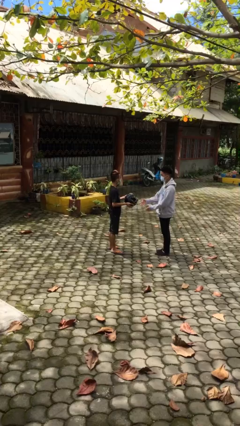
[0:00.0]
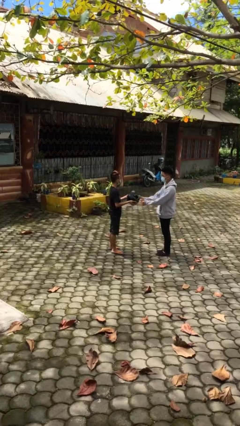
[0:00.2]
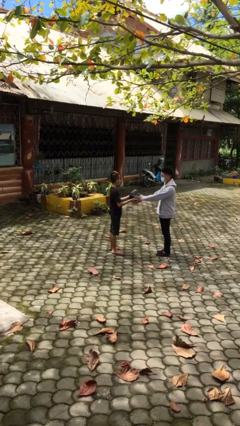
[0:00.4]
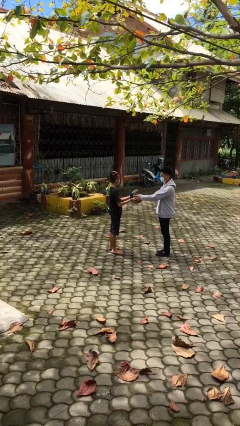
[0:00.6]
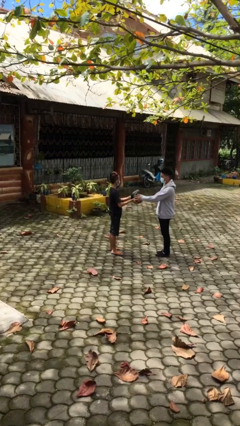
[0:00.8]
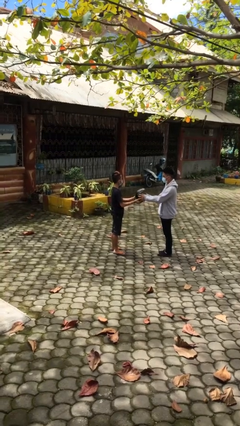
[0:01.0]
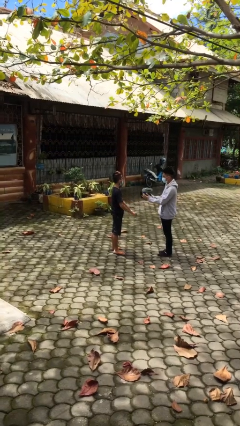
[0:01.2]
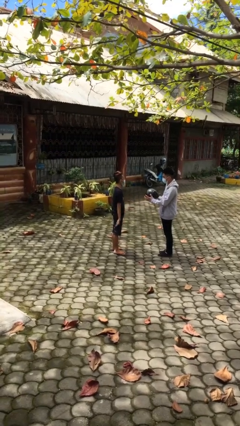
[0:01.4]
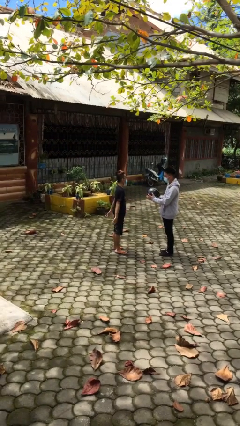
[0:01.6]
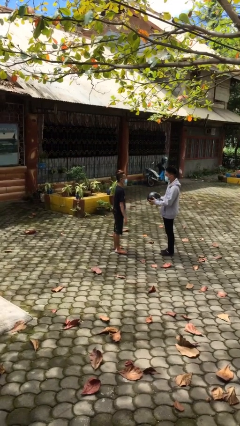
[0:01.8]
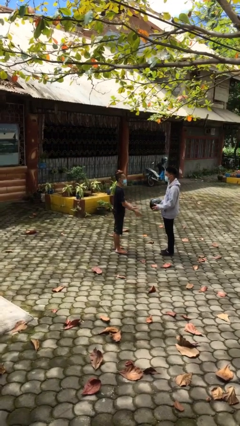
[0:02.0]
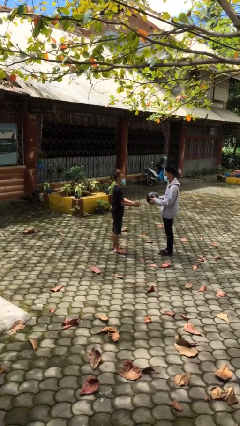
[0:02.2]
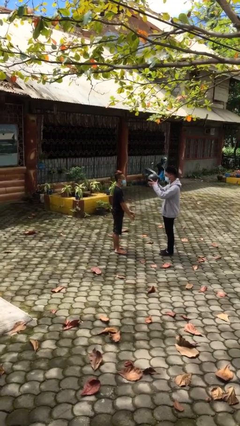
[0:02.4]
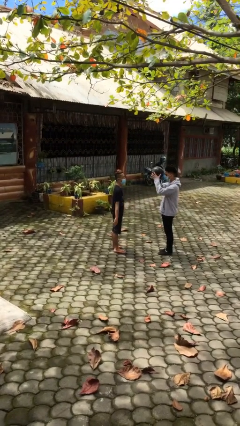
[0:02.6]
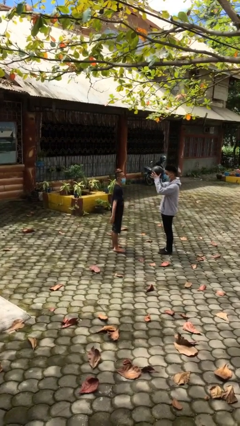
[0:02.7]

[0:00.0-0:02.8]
person transfers object to person

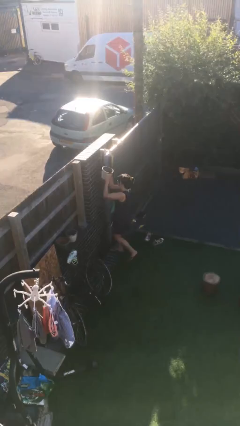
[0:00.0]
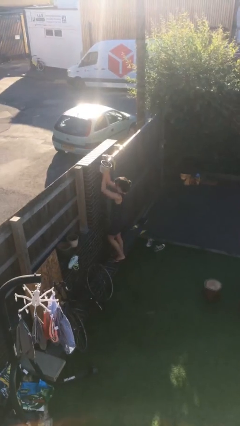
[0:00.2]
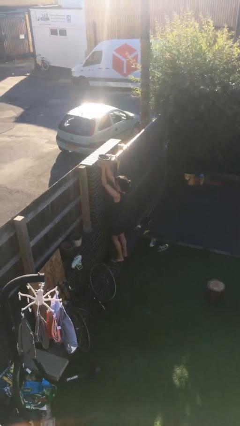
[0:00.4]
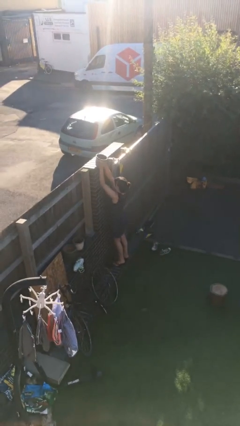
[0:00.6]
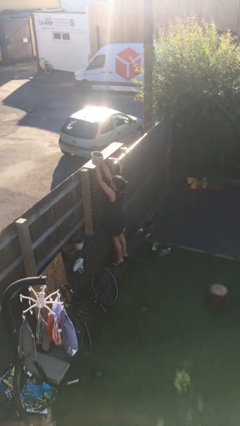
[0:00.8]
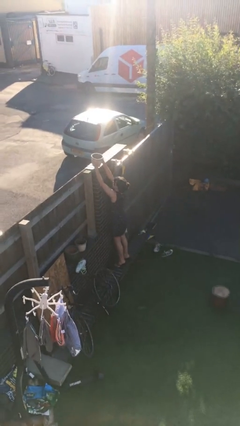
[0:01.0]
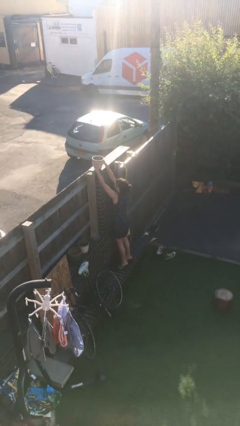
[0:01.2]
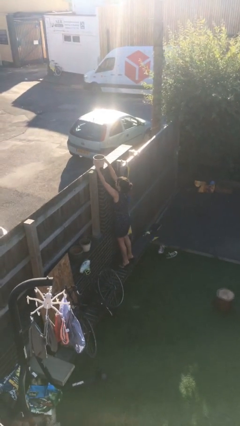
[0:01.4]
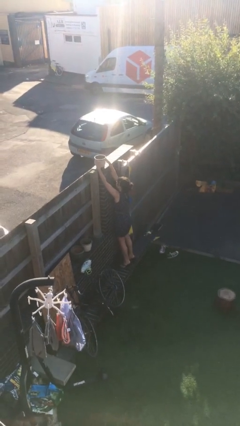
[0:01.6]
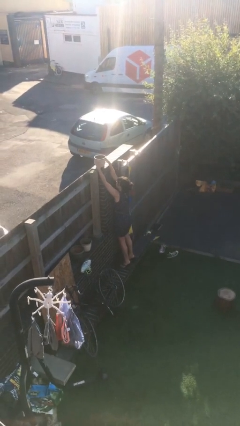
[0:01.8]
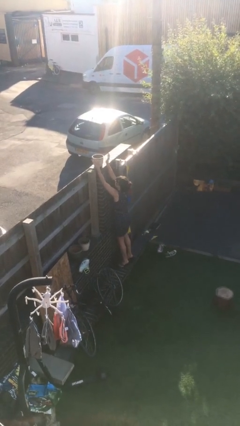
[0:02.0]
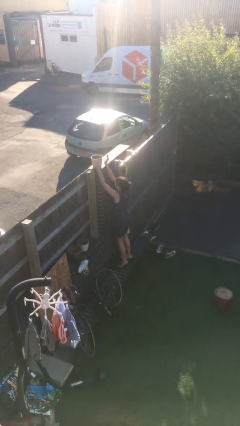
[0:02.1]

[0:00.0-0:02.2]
person puts down object on shelf

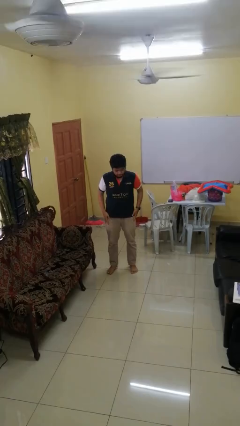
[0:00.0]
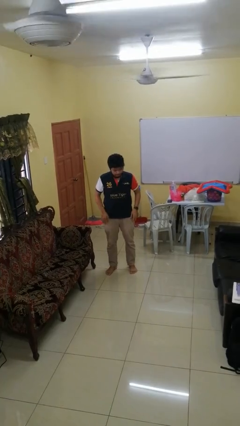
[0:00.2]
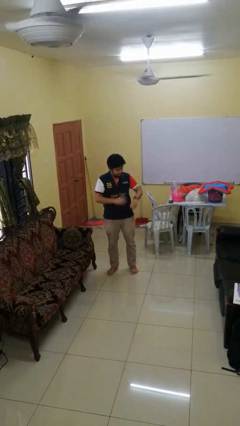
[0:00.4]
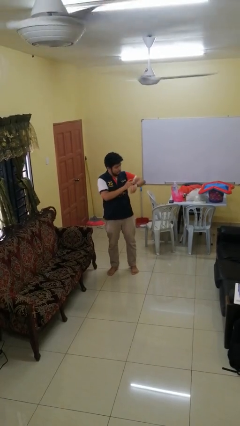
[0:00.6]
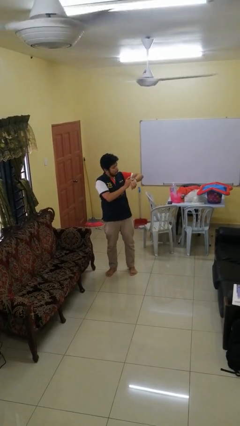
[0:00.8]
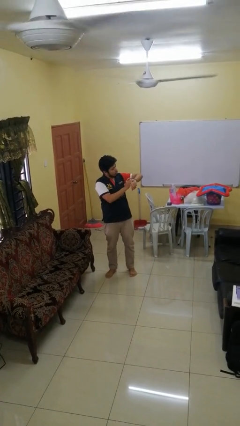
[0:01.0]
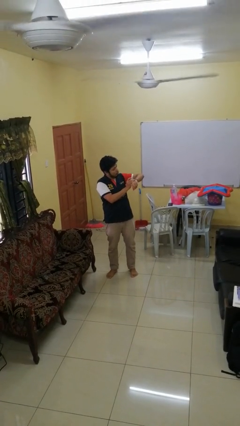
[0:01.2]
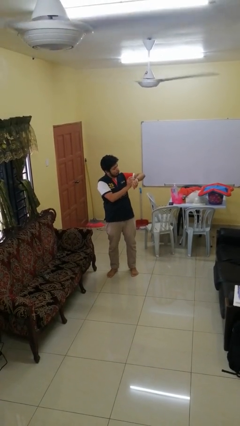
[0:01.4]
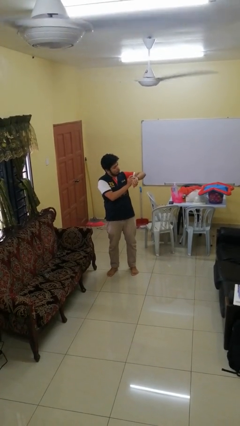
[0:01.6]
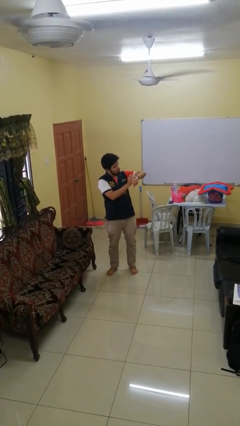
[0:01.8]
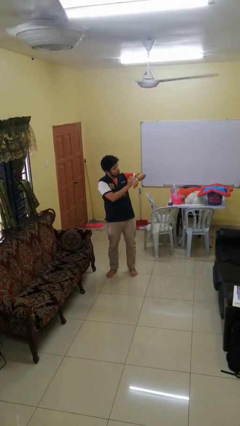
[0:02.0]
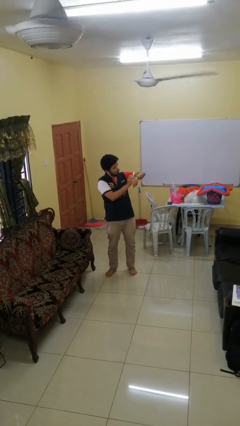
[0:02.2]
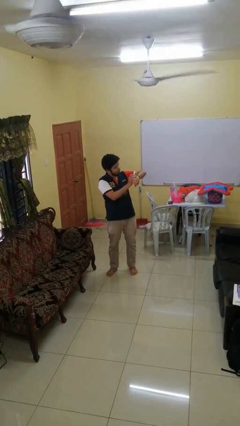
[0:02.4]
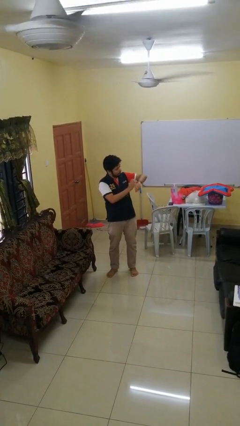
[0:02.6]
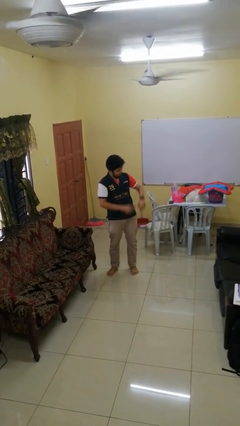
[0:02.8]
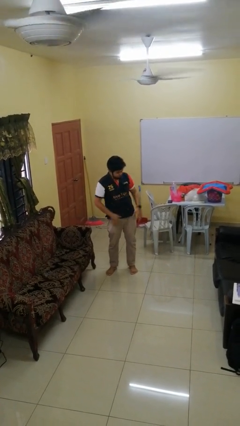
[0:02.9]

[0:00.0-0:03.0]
person looks at wristwatch

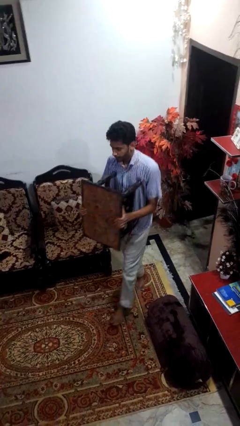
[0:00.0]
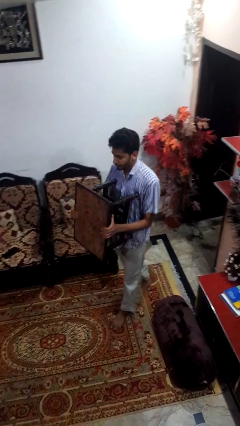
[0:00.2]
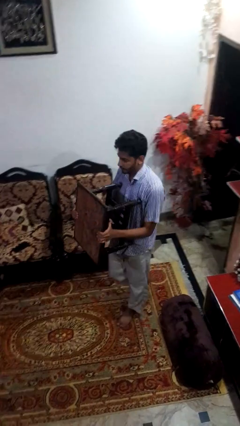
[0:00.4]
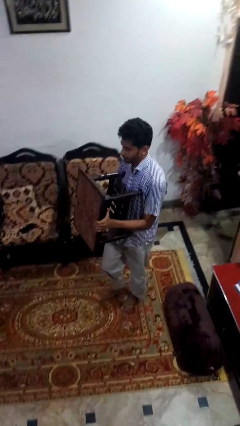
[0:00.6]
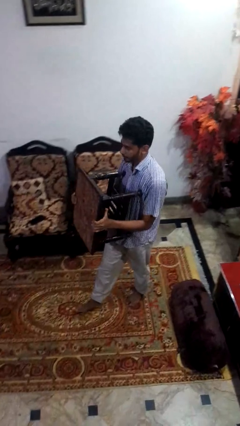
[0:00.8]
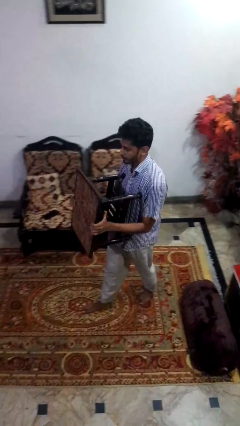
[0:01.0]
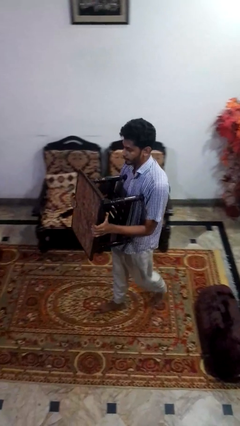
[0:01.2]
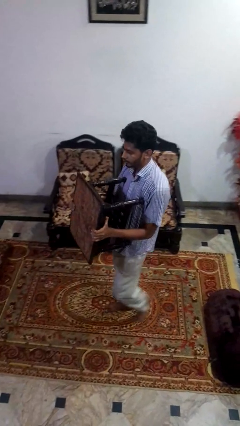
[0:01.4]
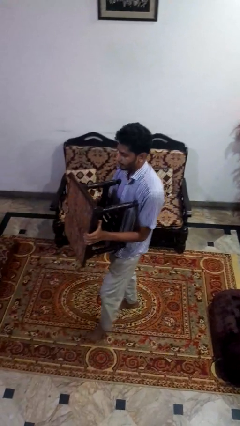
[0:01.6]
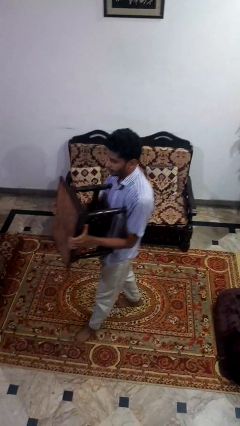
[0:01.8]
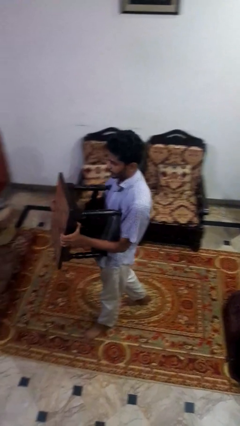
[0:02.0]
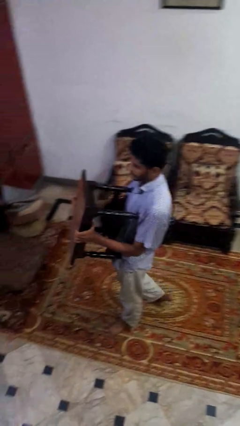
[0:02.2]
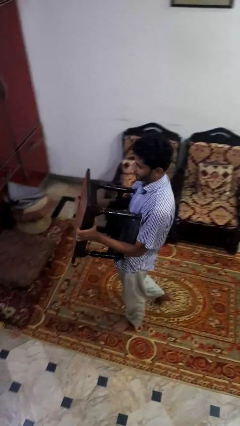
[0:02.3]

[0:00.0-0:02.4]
person carries furniture

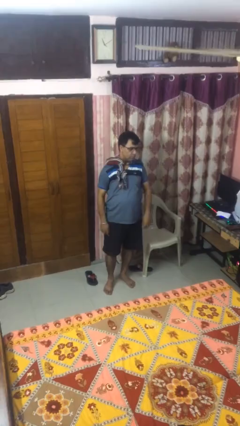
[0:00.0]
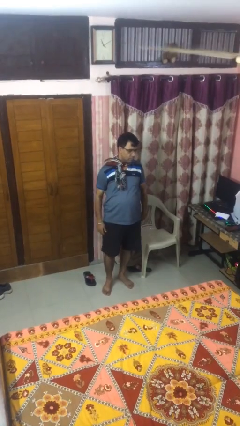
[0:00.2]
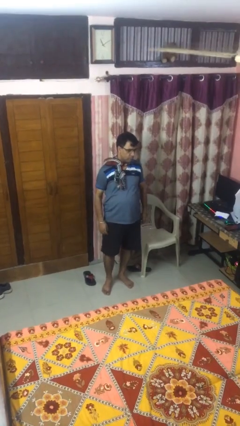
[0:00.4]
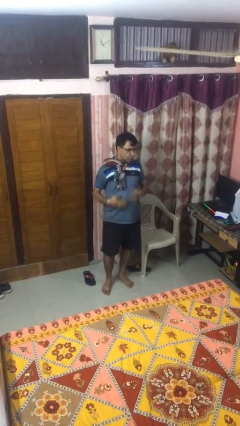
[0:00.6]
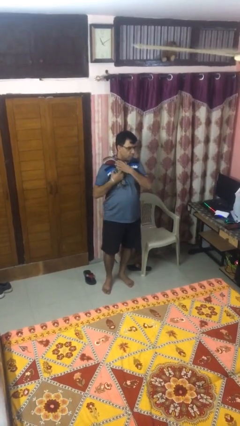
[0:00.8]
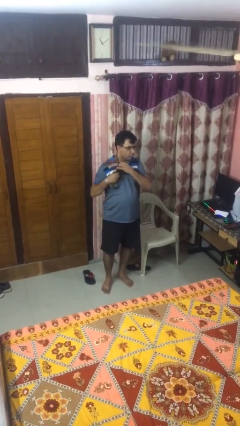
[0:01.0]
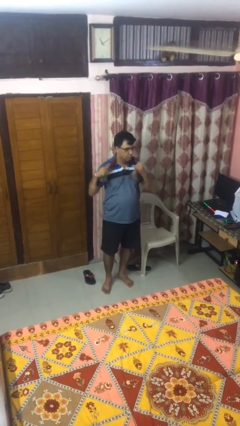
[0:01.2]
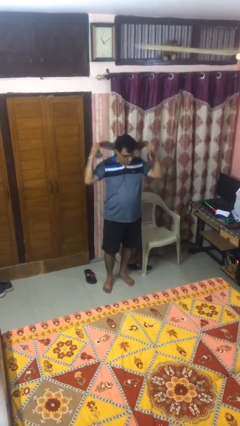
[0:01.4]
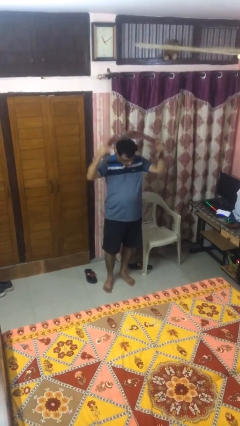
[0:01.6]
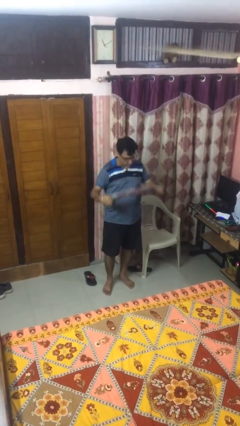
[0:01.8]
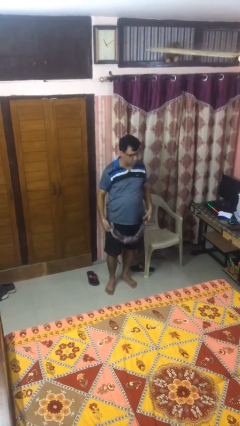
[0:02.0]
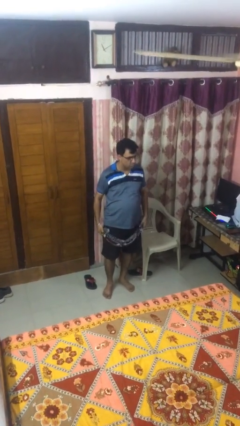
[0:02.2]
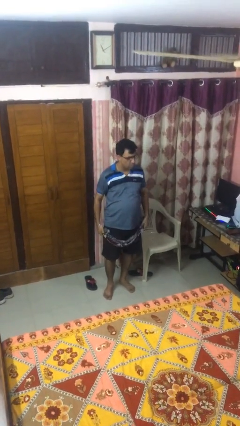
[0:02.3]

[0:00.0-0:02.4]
person takes off scarf

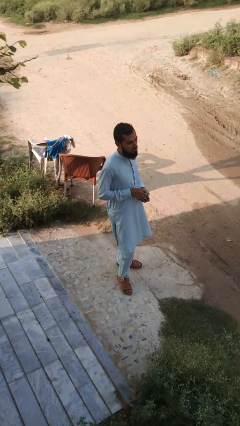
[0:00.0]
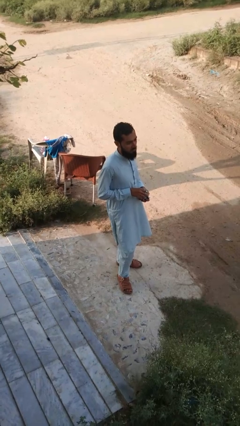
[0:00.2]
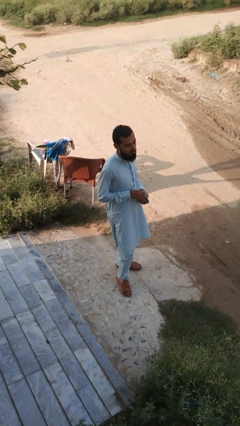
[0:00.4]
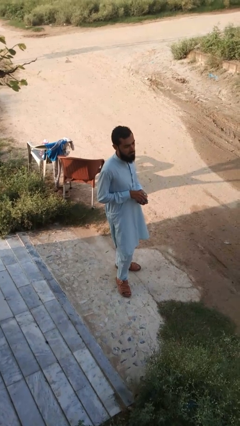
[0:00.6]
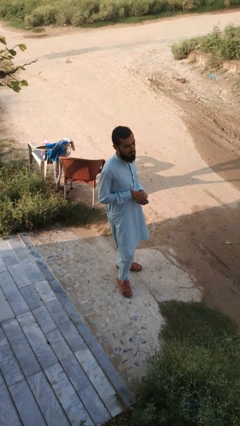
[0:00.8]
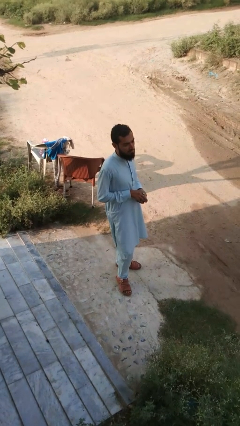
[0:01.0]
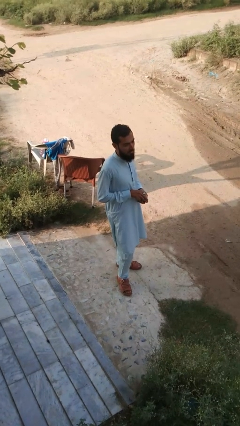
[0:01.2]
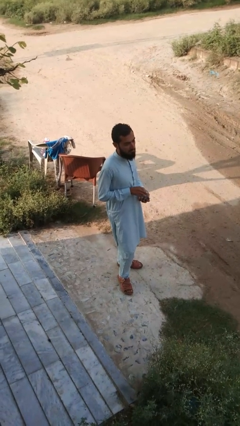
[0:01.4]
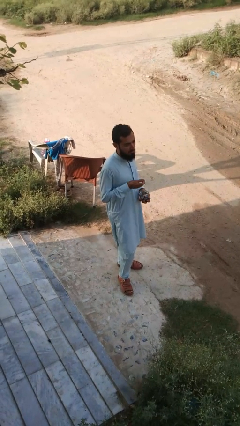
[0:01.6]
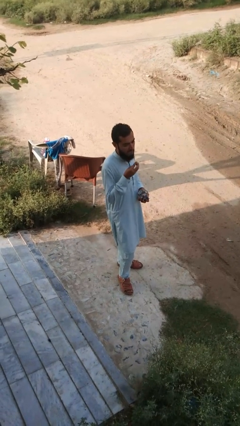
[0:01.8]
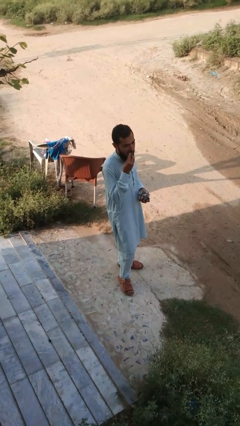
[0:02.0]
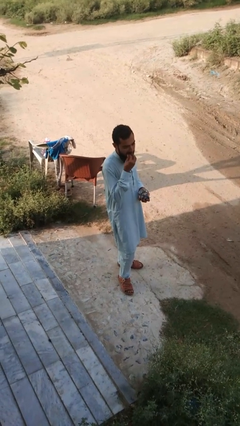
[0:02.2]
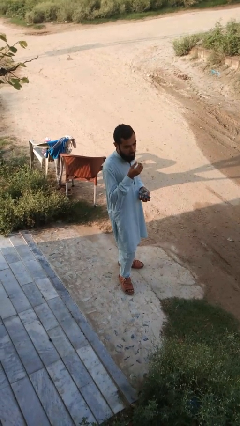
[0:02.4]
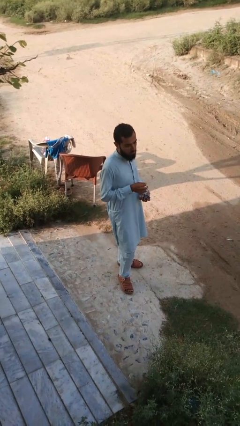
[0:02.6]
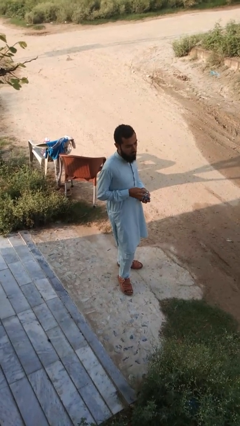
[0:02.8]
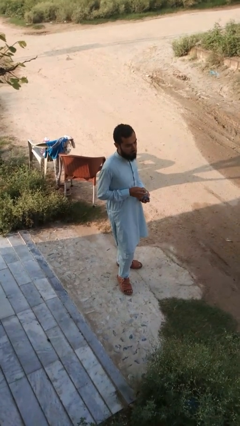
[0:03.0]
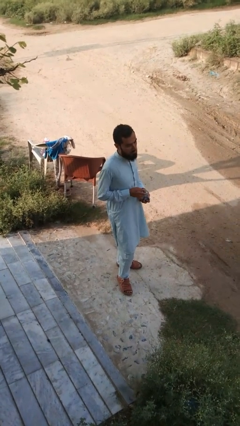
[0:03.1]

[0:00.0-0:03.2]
person eats snack from bag

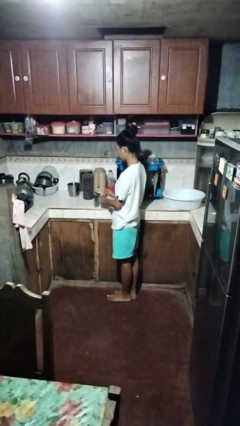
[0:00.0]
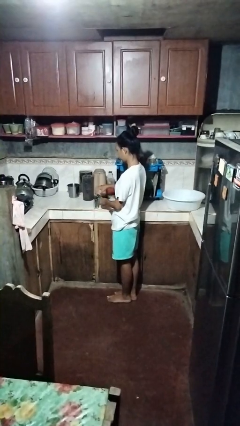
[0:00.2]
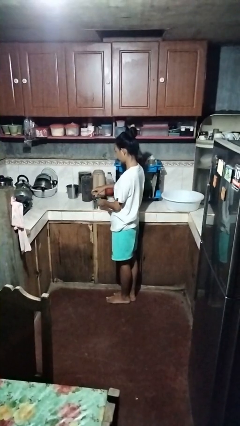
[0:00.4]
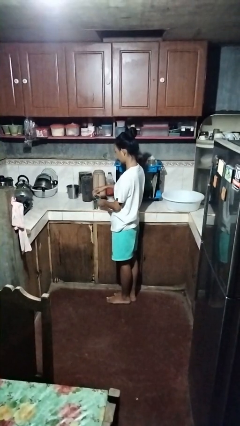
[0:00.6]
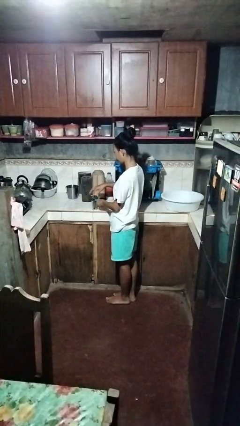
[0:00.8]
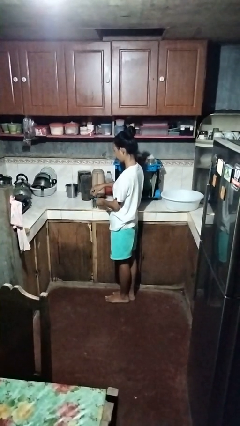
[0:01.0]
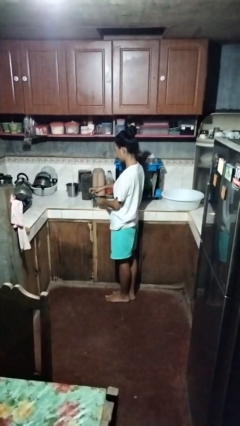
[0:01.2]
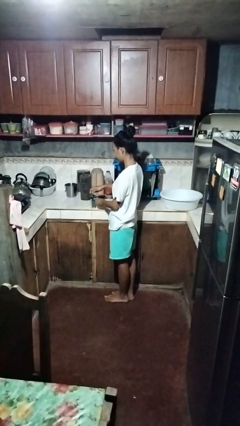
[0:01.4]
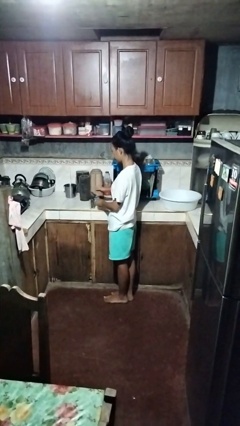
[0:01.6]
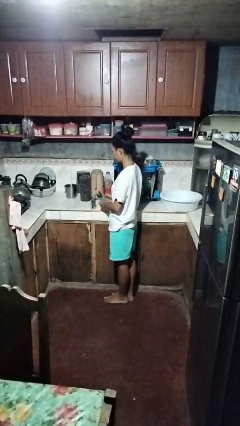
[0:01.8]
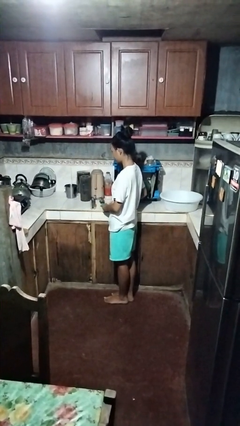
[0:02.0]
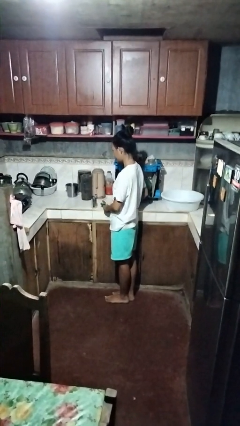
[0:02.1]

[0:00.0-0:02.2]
person opens can with can opener
